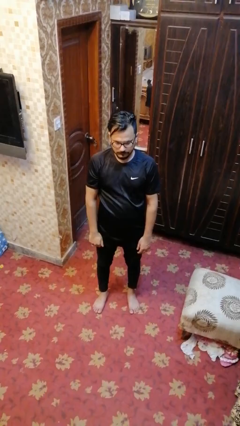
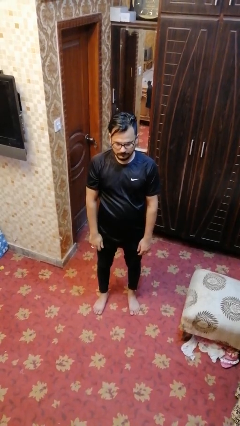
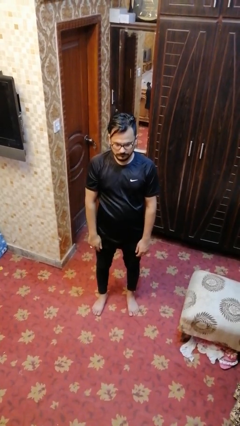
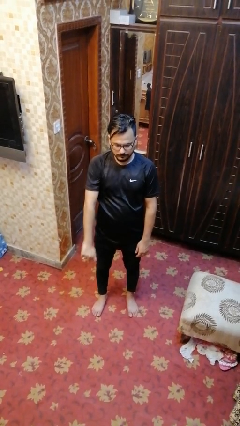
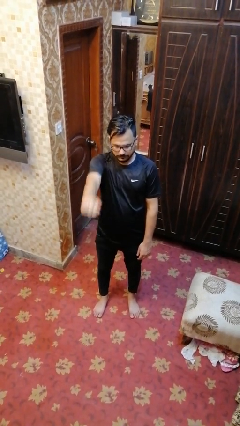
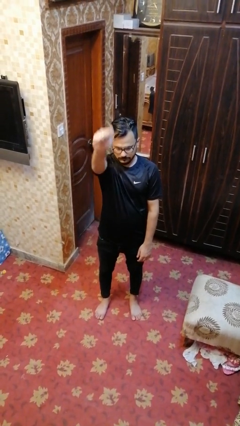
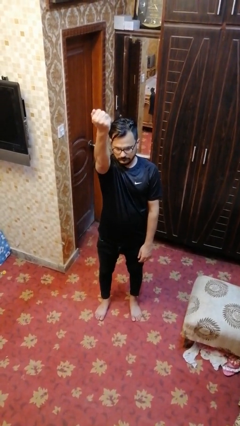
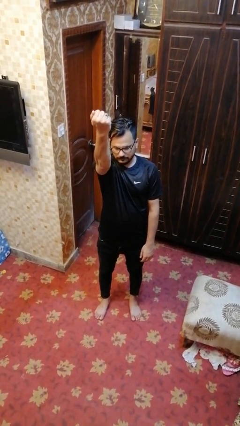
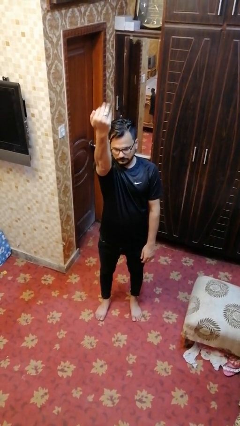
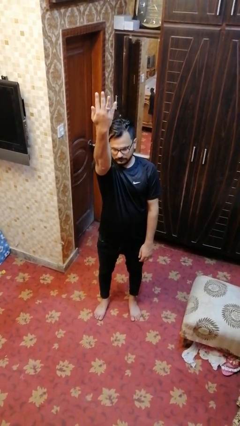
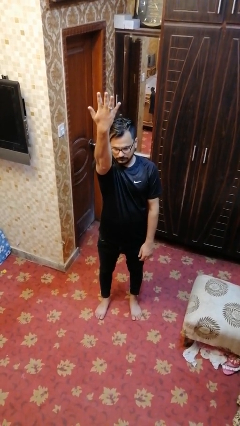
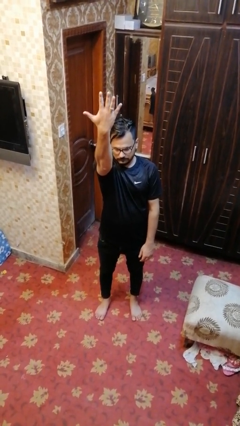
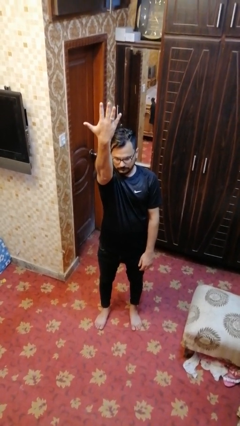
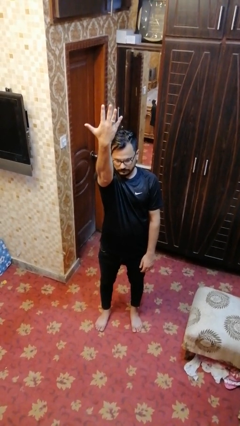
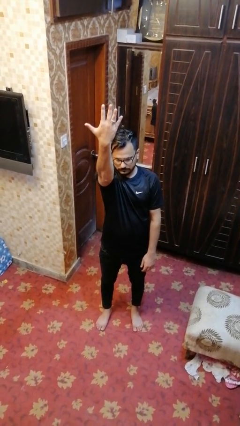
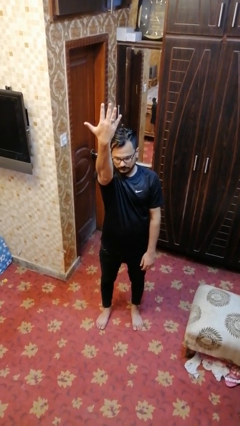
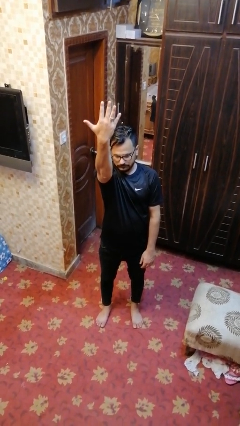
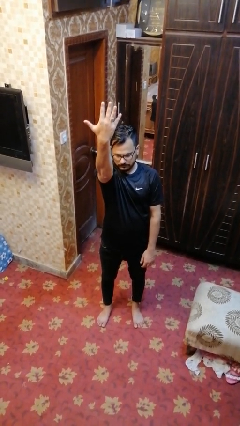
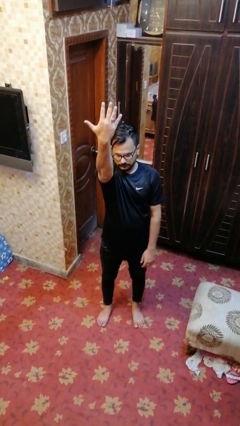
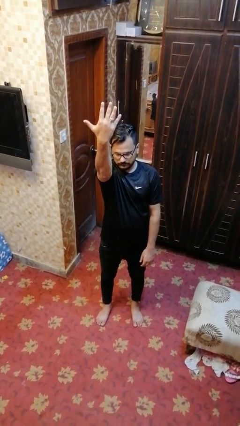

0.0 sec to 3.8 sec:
person gestures number five

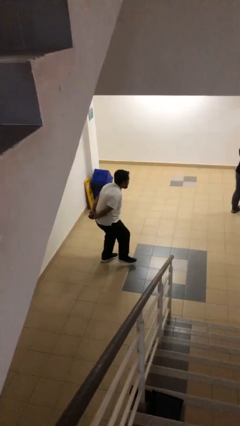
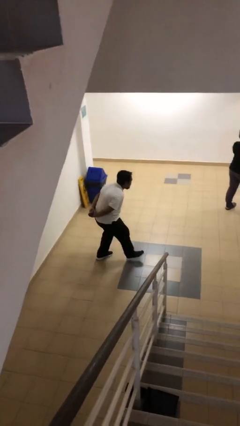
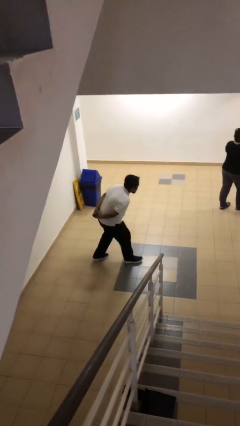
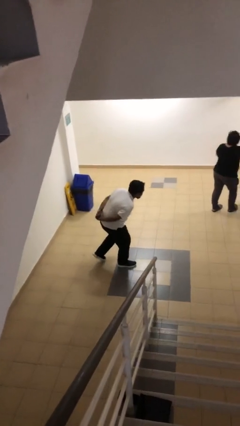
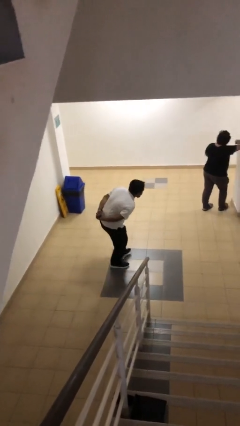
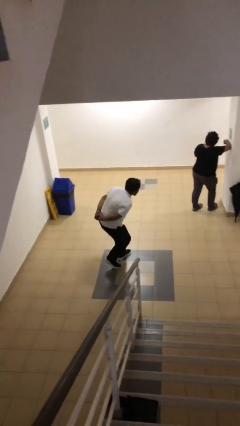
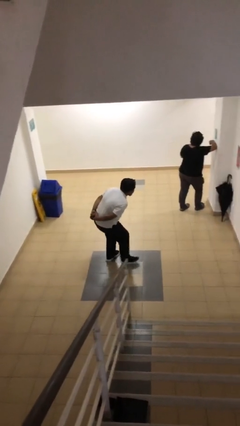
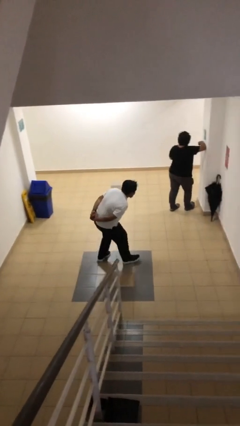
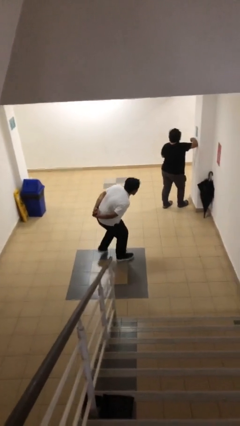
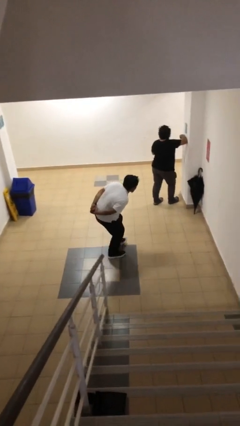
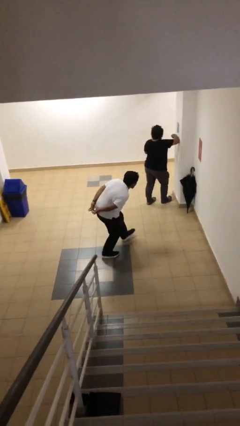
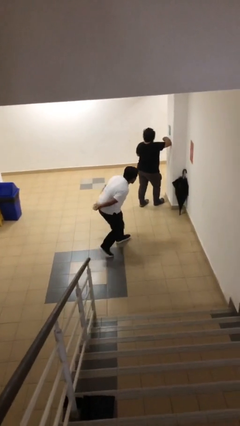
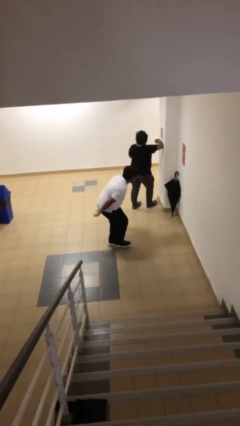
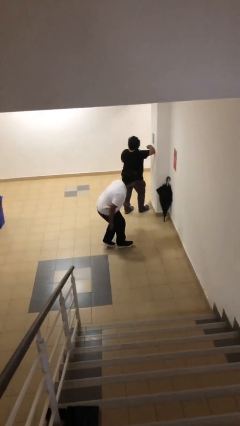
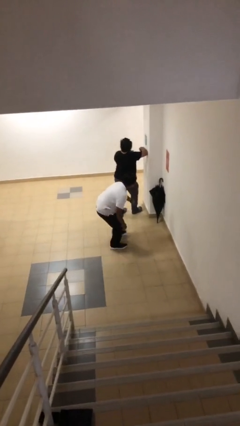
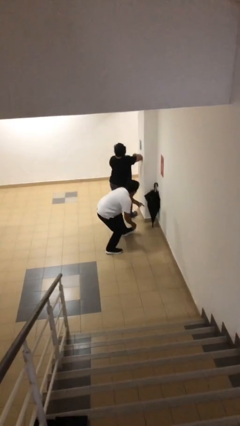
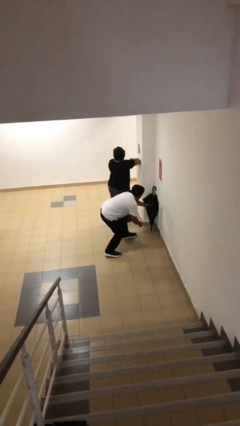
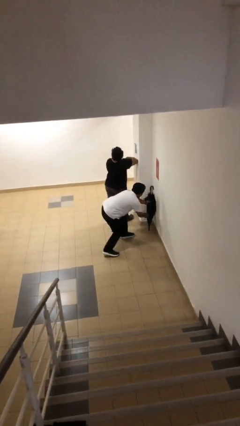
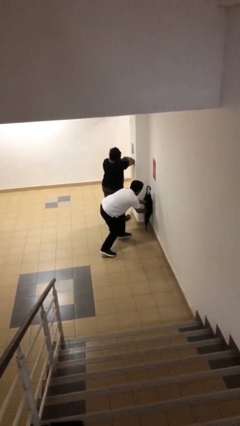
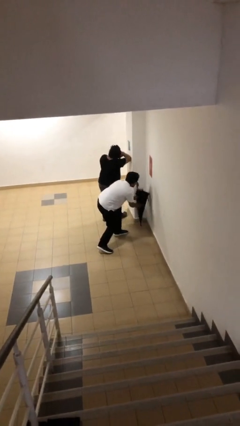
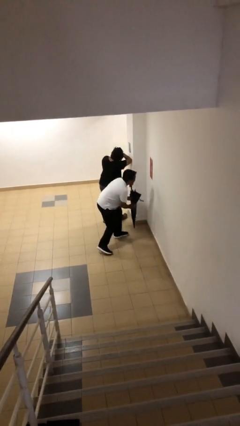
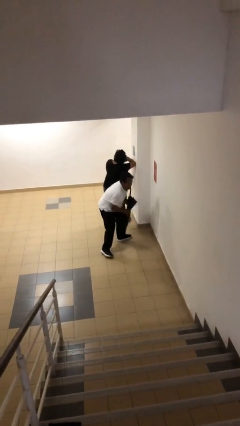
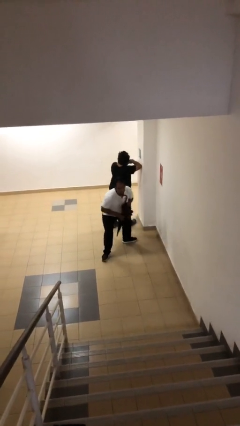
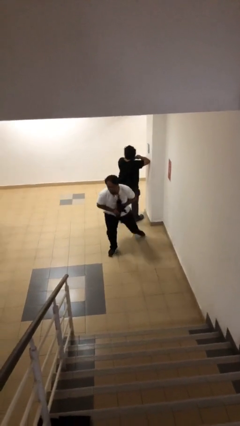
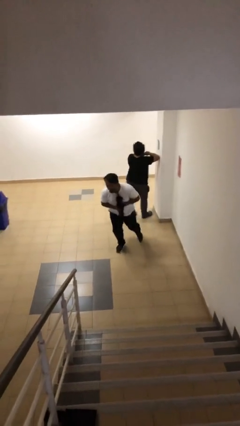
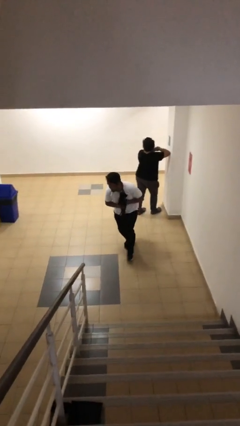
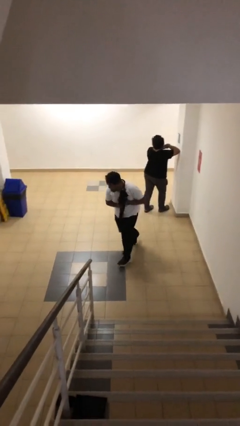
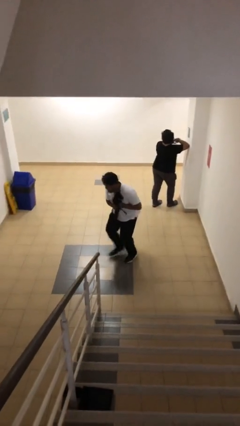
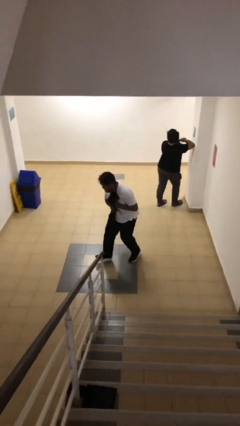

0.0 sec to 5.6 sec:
person steals object from person

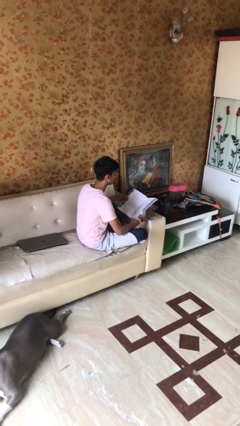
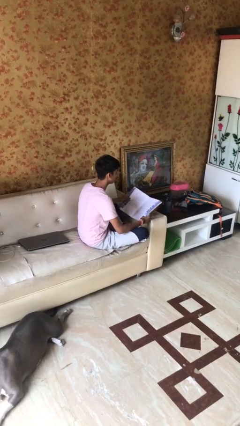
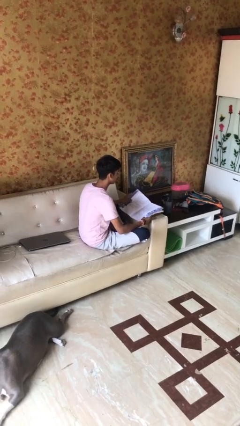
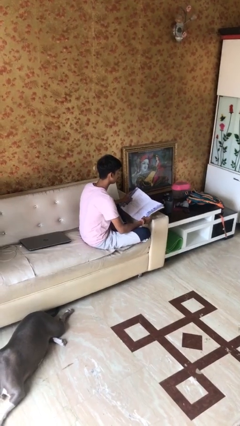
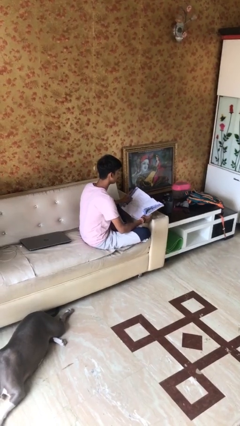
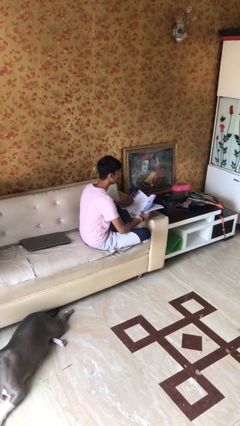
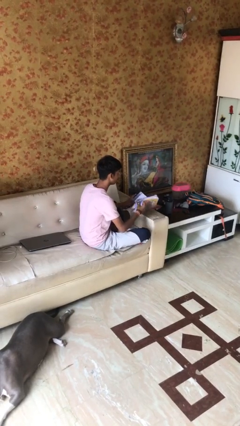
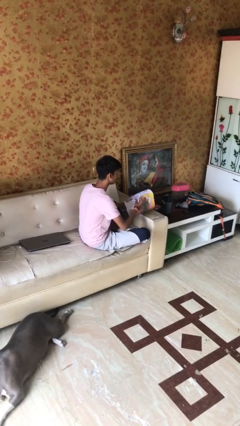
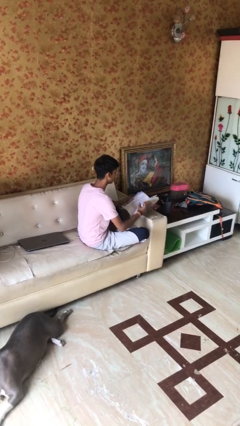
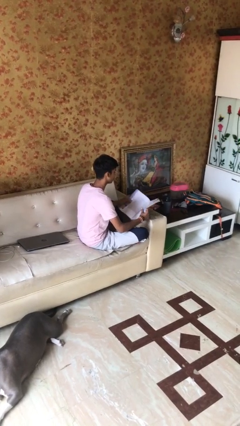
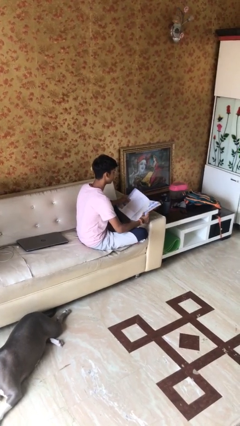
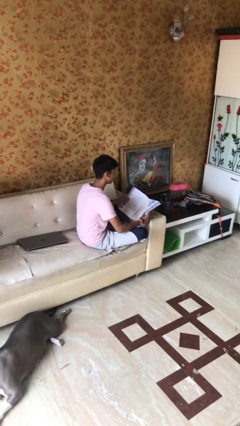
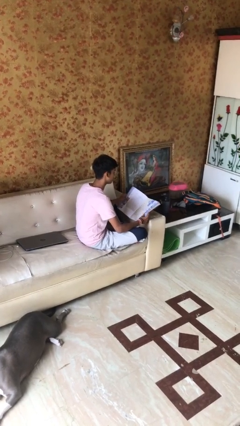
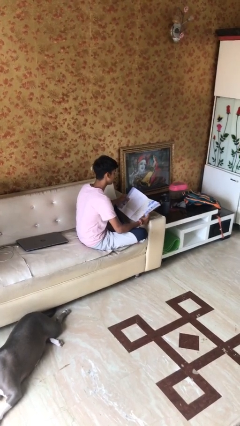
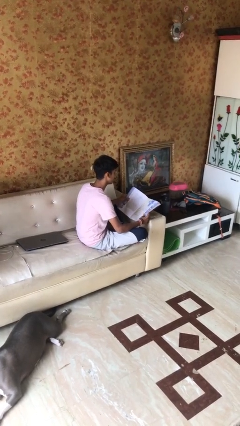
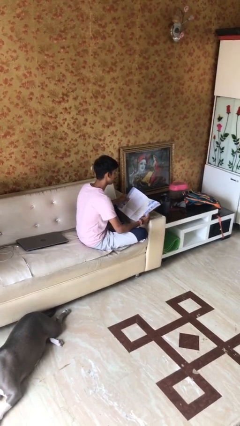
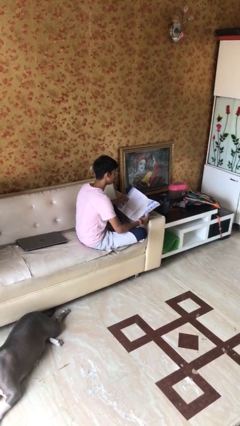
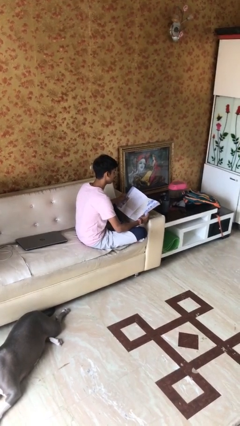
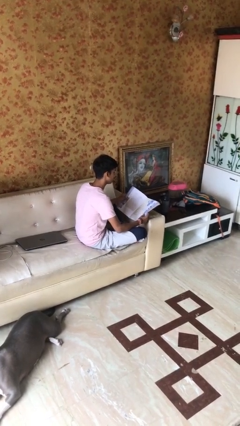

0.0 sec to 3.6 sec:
person reads magazine

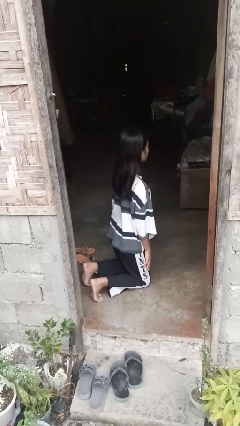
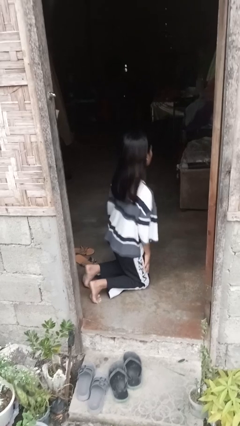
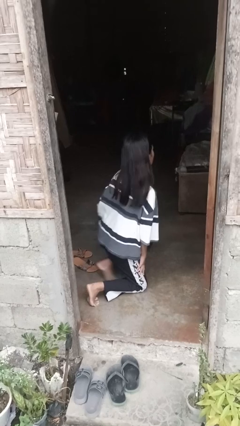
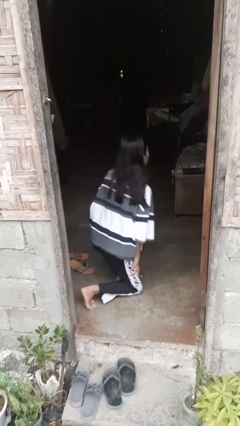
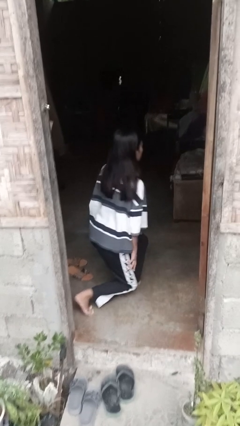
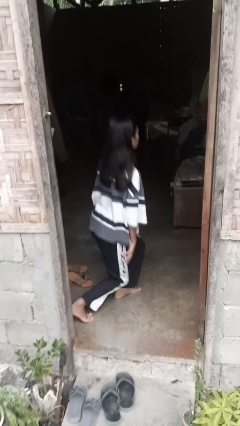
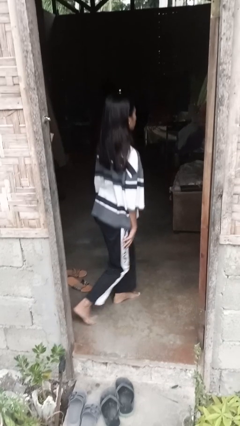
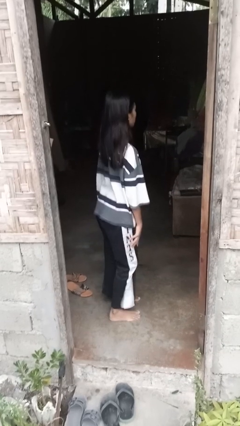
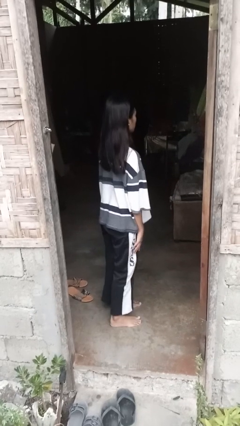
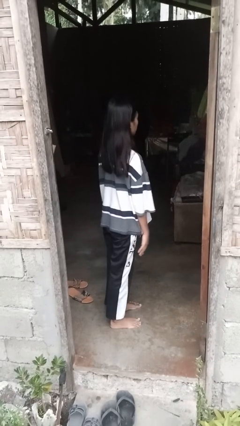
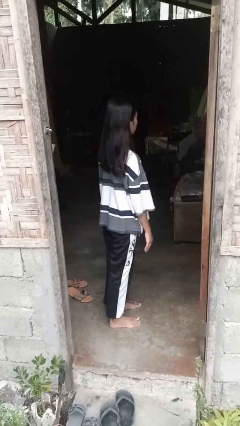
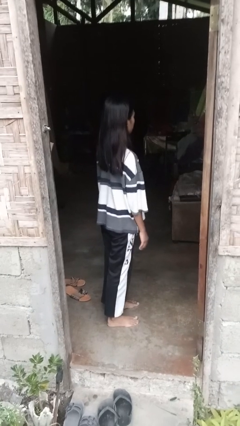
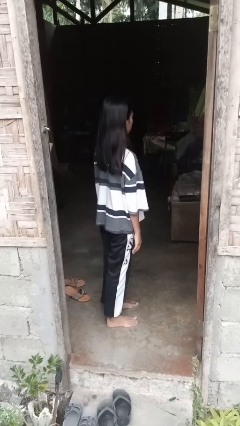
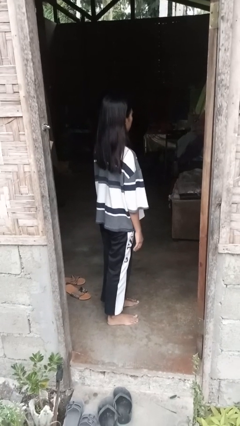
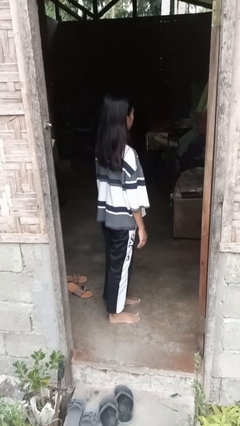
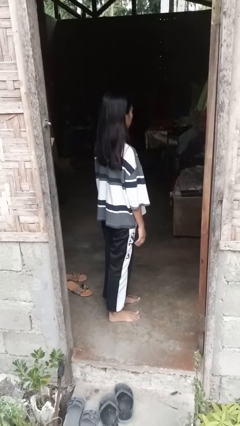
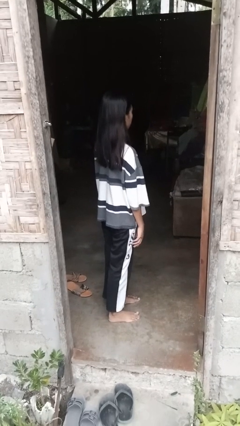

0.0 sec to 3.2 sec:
person stands up from floor

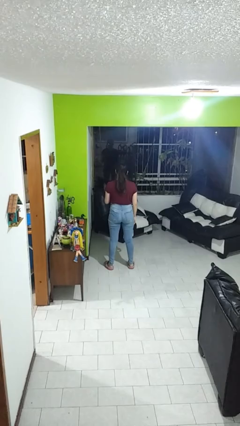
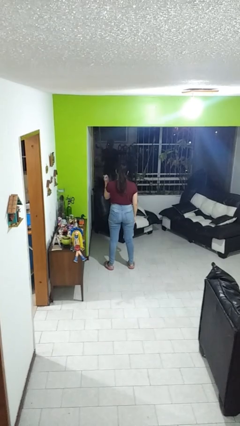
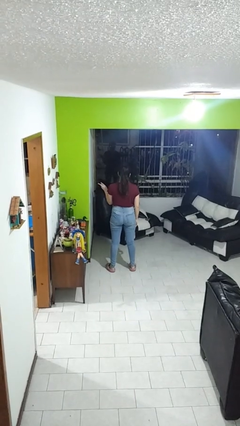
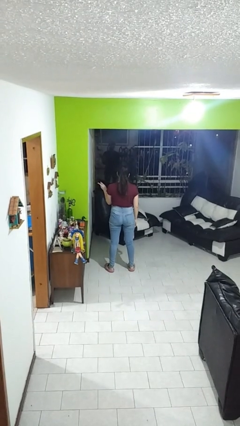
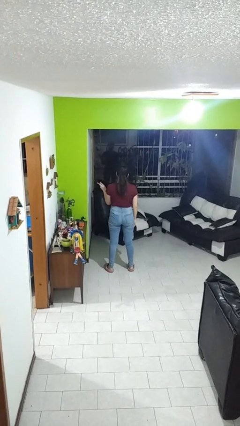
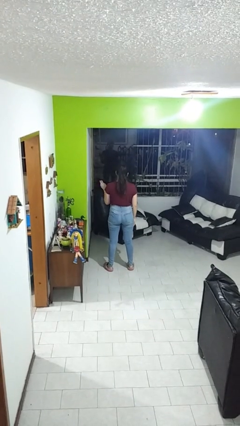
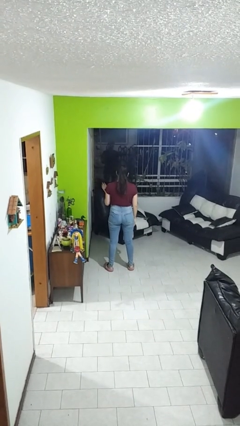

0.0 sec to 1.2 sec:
person gestures peace

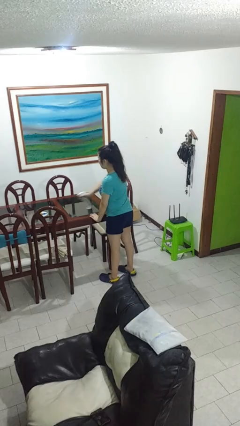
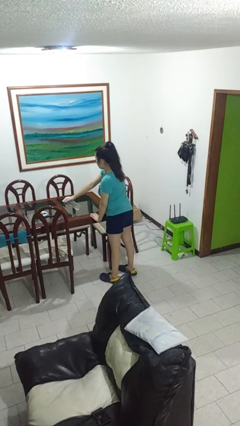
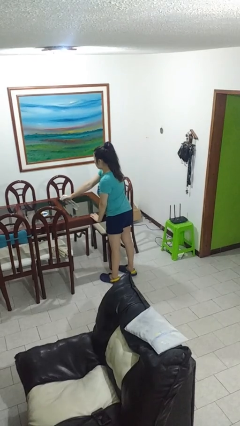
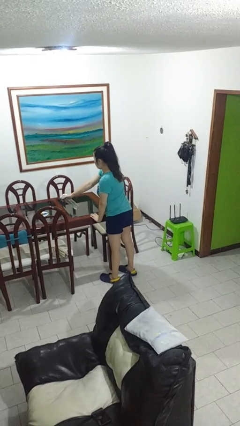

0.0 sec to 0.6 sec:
person sprays from bottle
